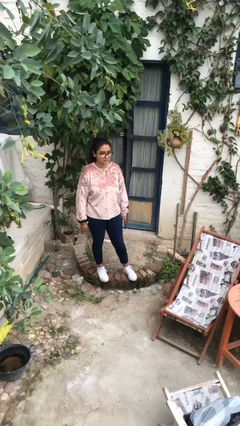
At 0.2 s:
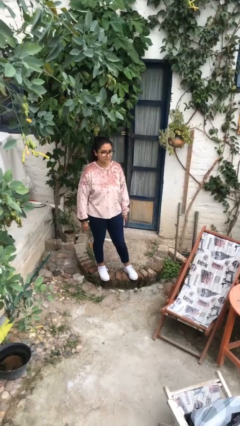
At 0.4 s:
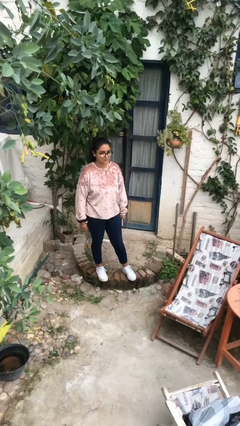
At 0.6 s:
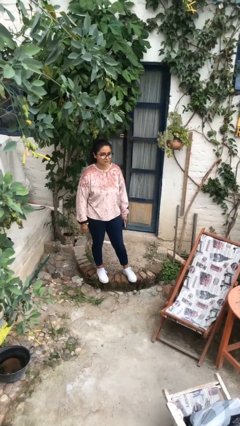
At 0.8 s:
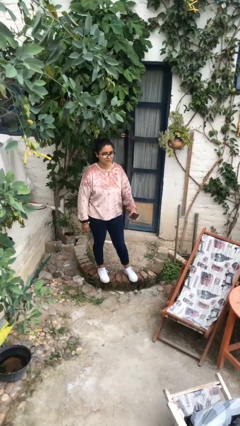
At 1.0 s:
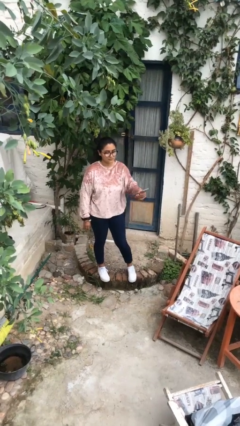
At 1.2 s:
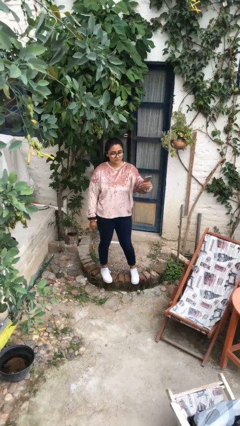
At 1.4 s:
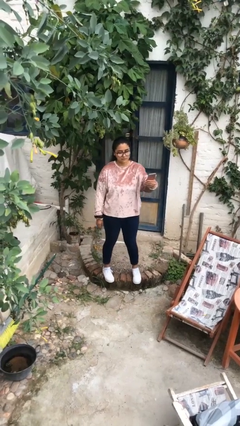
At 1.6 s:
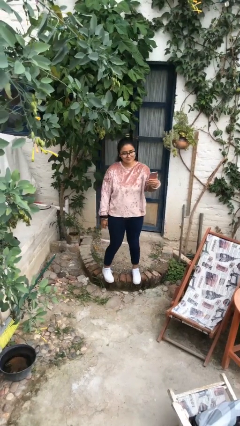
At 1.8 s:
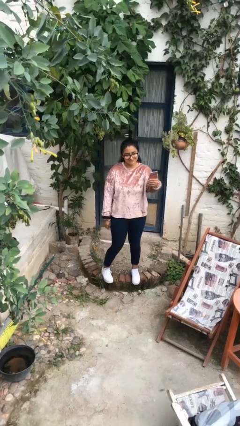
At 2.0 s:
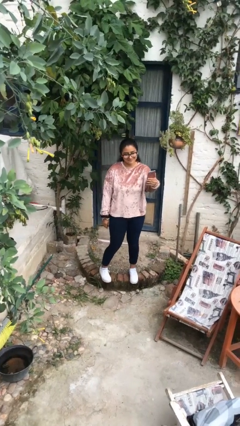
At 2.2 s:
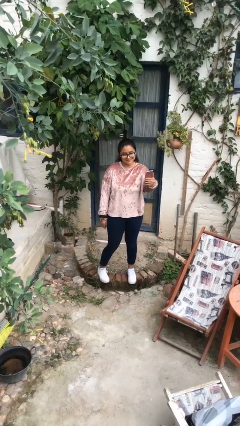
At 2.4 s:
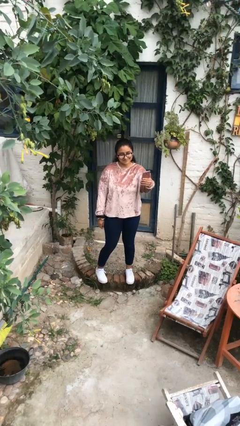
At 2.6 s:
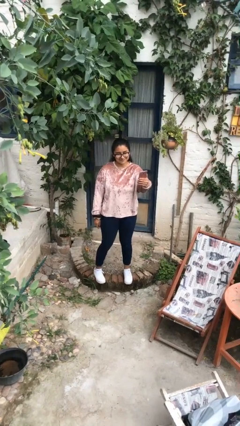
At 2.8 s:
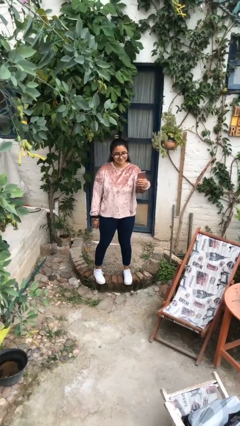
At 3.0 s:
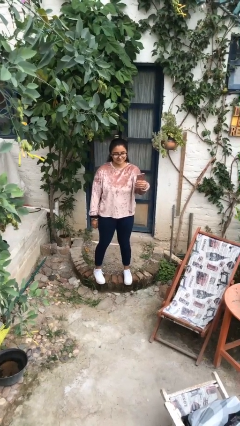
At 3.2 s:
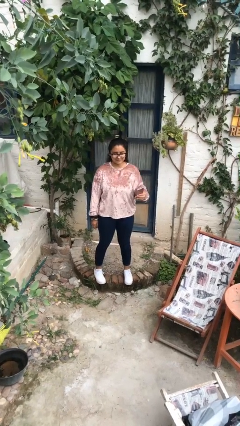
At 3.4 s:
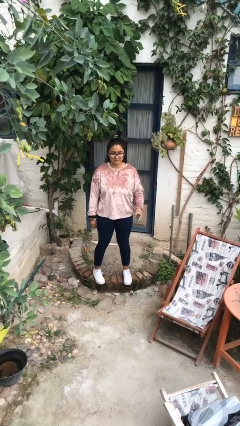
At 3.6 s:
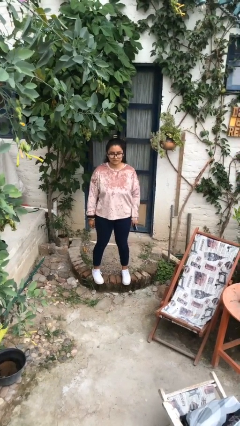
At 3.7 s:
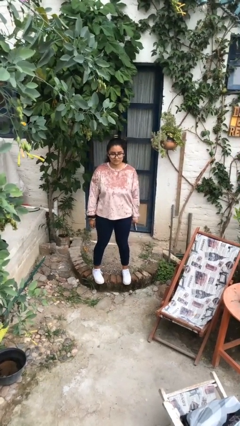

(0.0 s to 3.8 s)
person takes selfie

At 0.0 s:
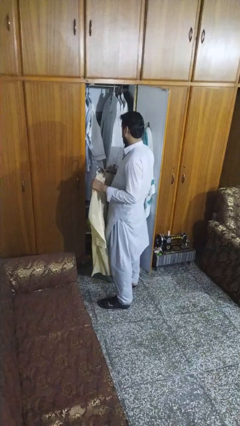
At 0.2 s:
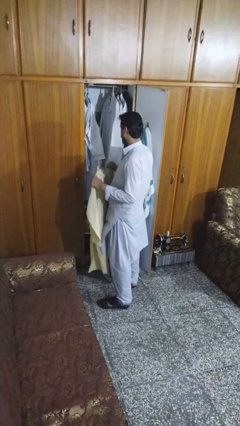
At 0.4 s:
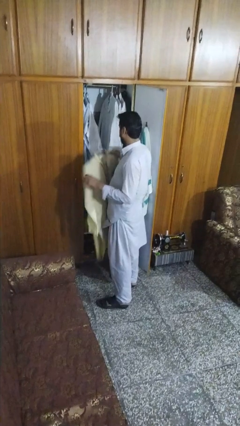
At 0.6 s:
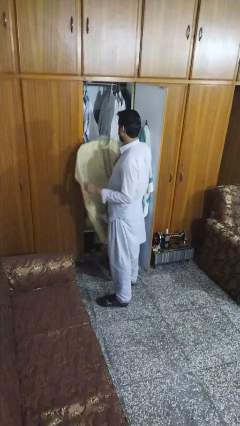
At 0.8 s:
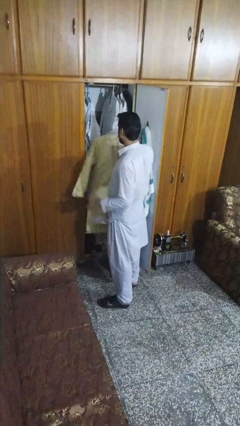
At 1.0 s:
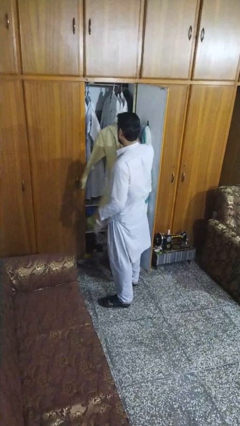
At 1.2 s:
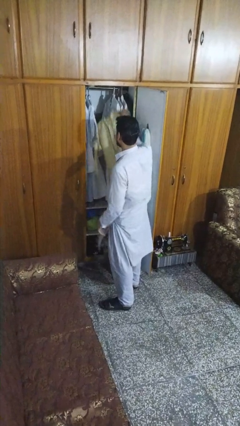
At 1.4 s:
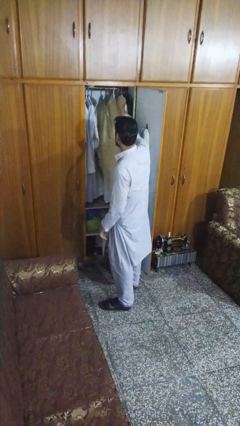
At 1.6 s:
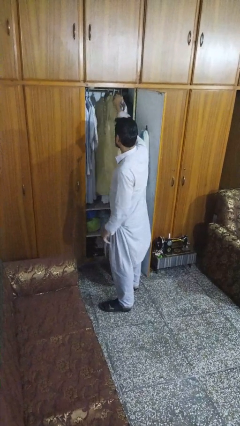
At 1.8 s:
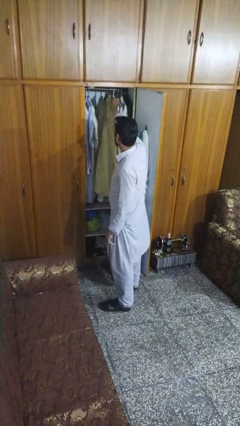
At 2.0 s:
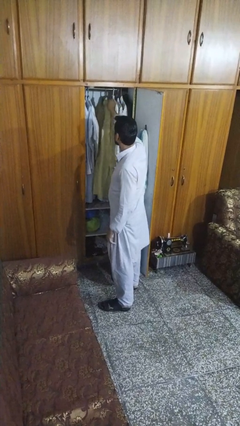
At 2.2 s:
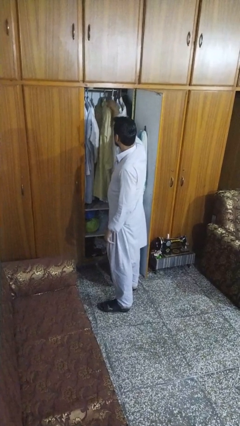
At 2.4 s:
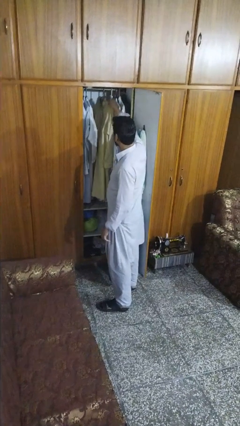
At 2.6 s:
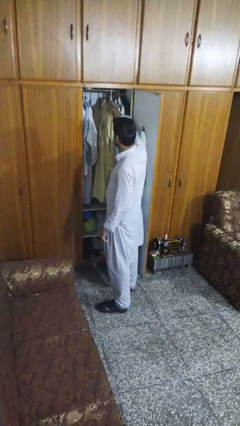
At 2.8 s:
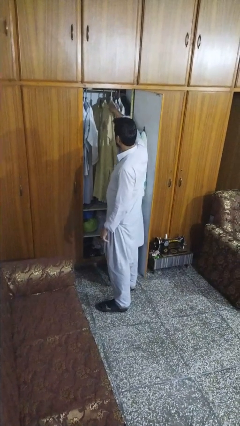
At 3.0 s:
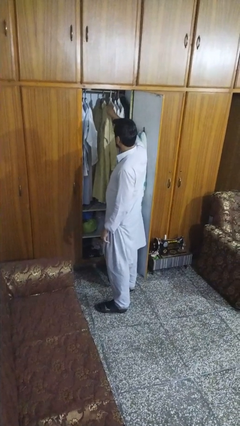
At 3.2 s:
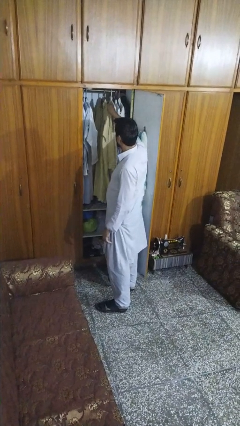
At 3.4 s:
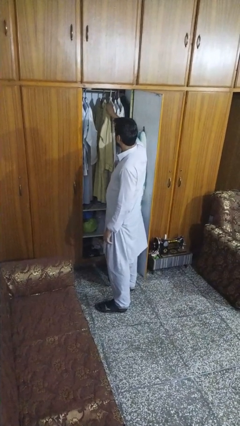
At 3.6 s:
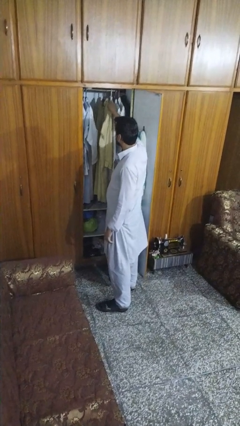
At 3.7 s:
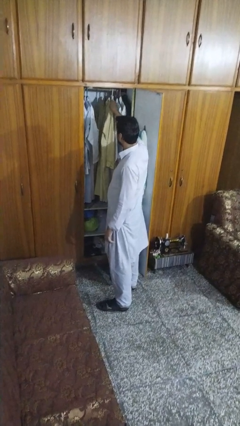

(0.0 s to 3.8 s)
person puts clothes into dresser

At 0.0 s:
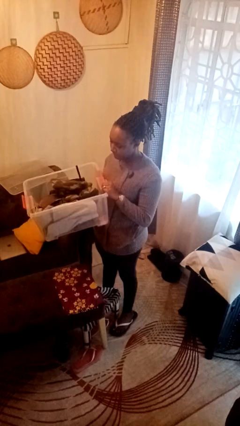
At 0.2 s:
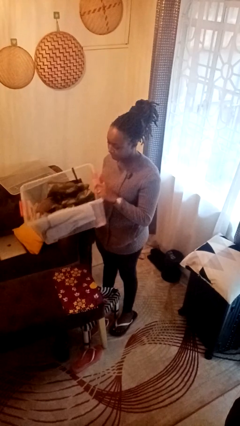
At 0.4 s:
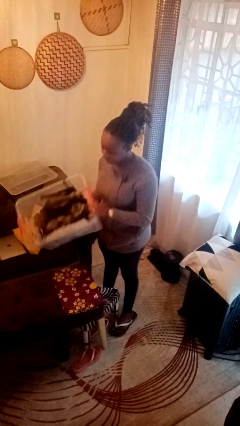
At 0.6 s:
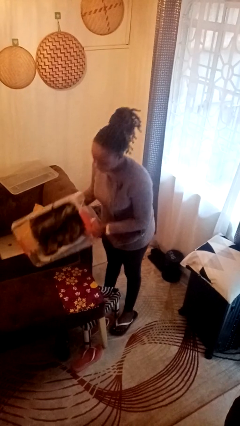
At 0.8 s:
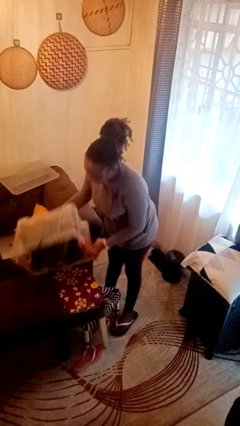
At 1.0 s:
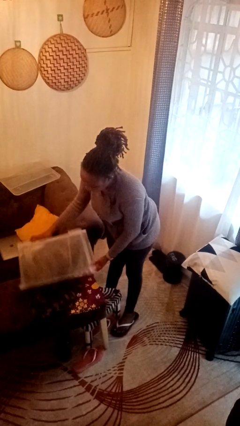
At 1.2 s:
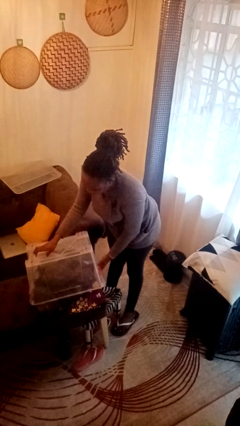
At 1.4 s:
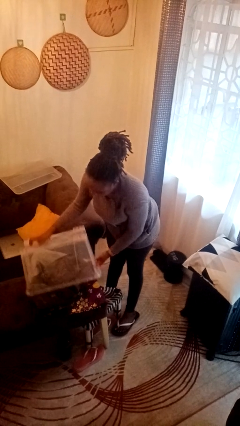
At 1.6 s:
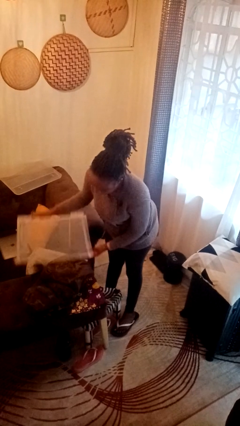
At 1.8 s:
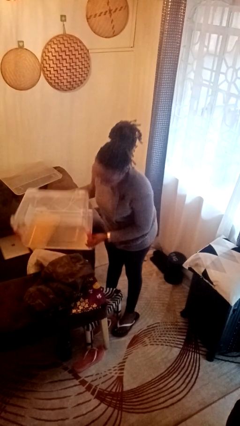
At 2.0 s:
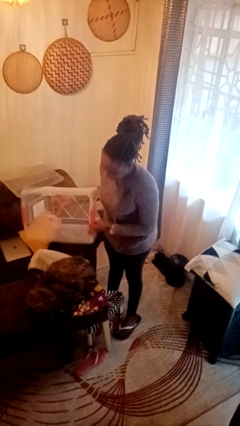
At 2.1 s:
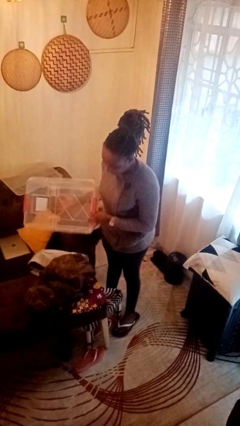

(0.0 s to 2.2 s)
person unloads box onto table

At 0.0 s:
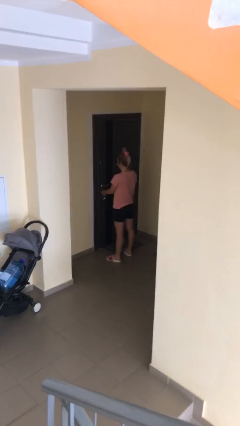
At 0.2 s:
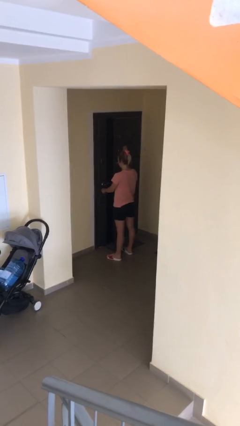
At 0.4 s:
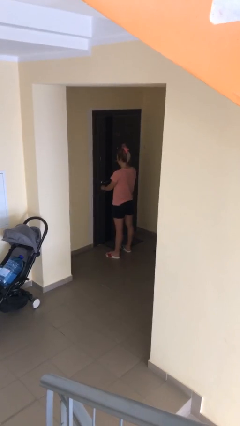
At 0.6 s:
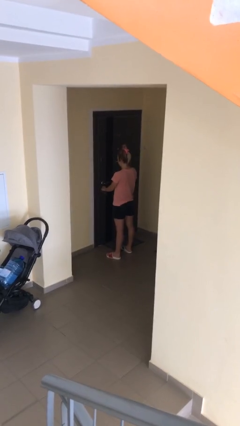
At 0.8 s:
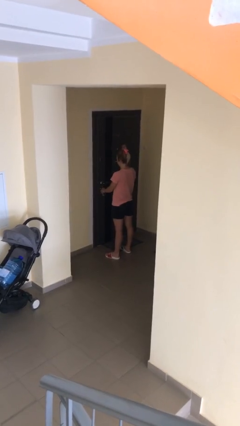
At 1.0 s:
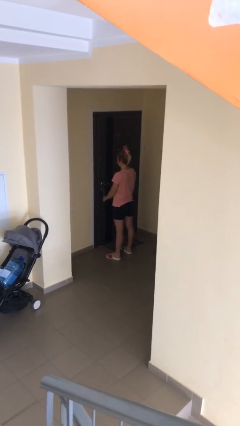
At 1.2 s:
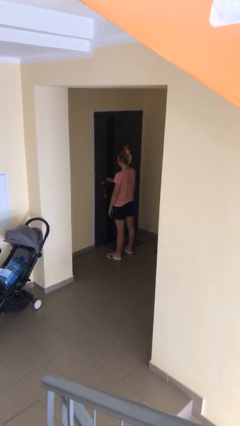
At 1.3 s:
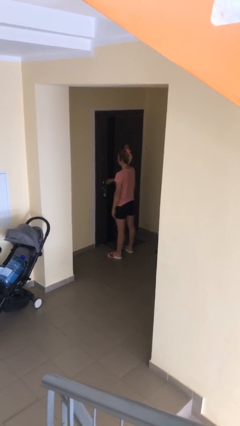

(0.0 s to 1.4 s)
person unlocks door with keys

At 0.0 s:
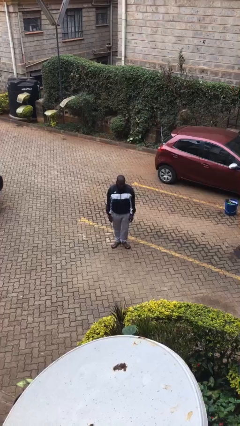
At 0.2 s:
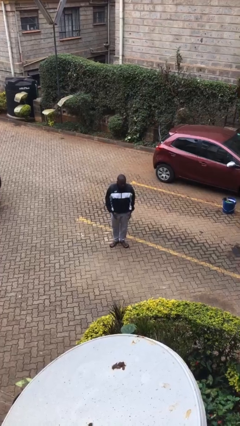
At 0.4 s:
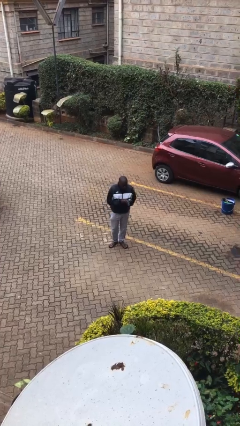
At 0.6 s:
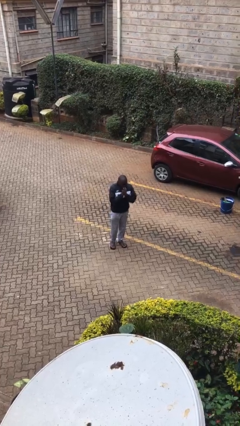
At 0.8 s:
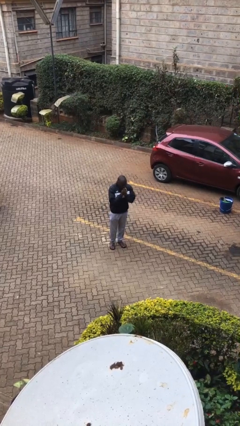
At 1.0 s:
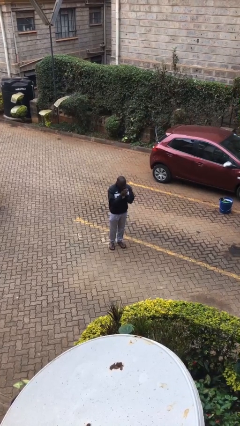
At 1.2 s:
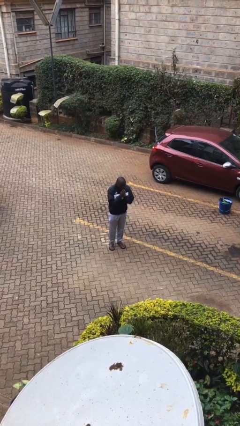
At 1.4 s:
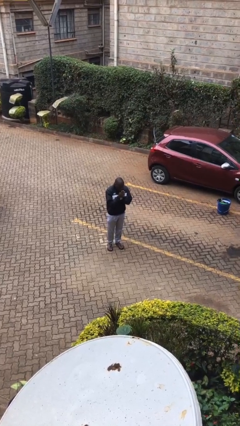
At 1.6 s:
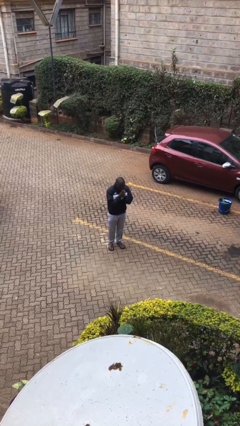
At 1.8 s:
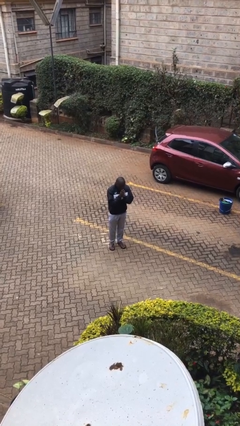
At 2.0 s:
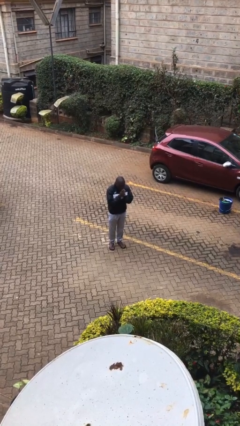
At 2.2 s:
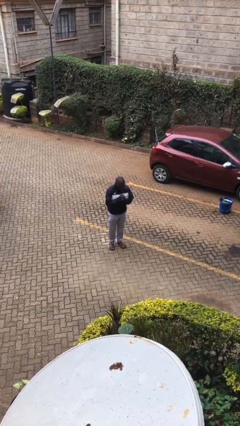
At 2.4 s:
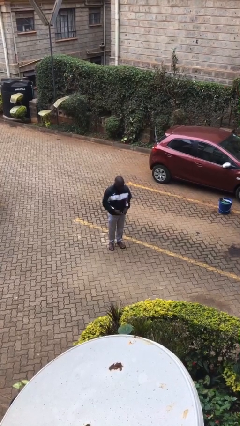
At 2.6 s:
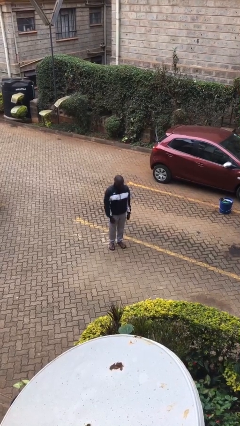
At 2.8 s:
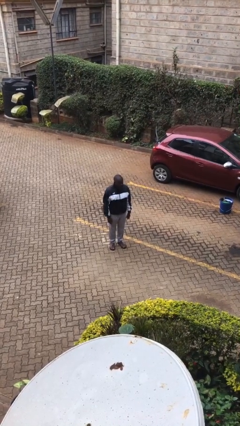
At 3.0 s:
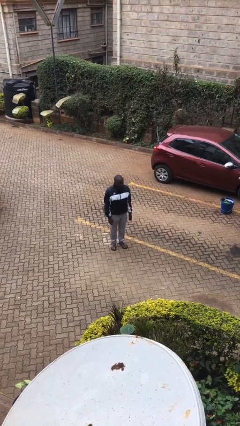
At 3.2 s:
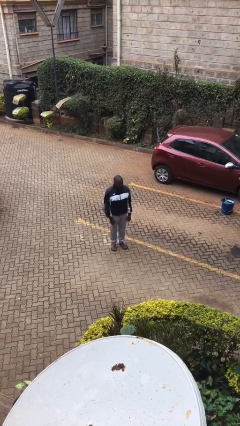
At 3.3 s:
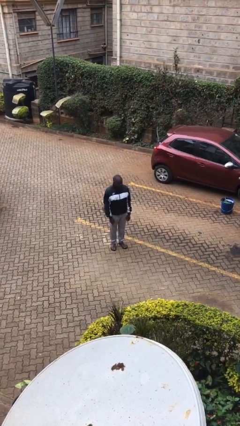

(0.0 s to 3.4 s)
person blows into hands

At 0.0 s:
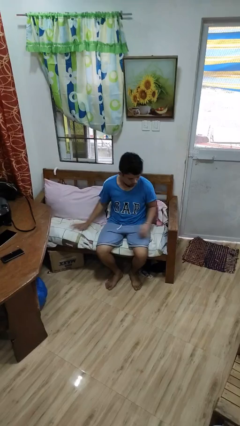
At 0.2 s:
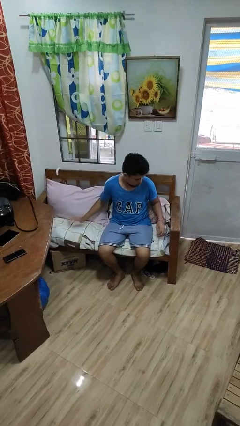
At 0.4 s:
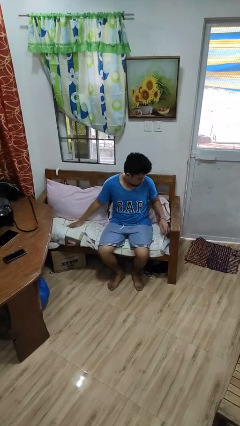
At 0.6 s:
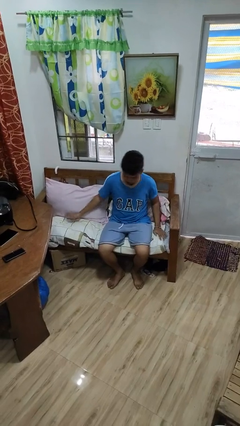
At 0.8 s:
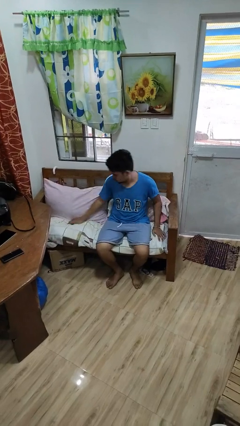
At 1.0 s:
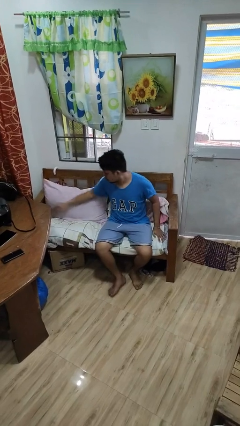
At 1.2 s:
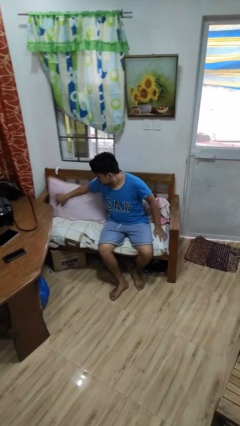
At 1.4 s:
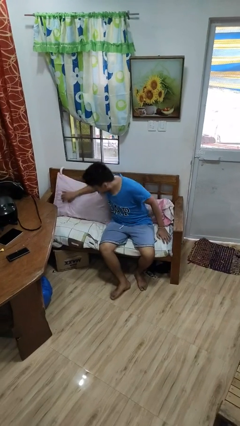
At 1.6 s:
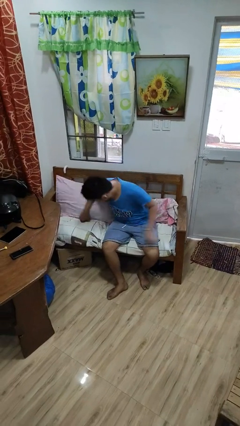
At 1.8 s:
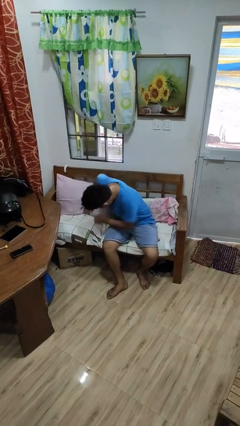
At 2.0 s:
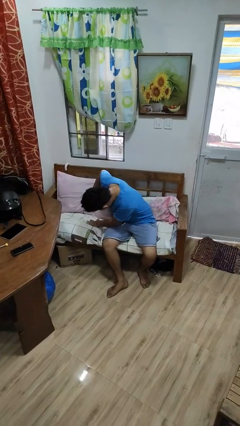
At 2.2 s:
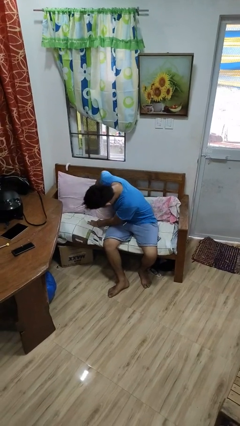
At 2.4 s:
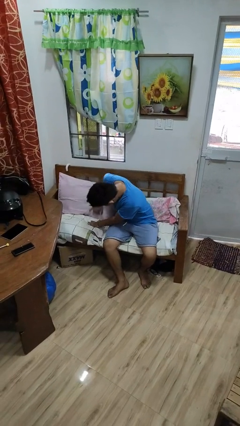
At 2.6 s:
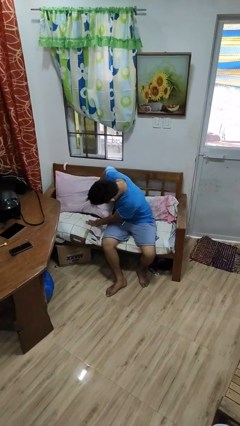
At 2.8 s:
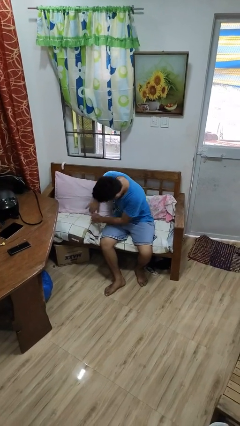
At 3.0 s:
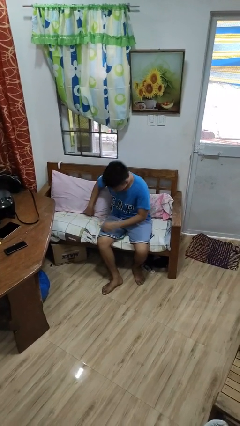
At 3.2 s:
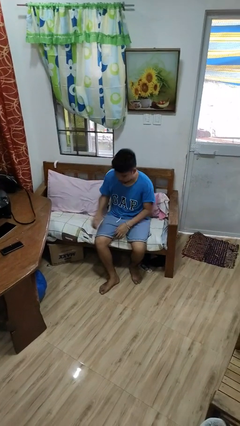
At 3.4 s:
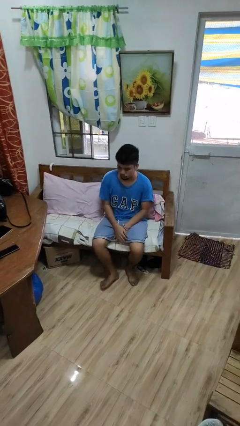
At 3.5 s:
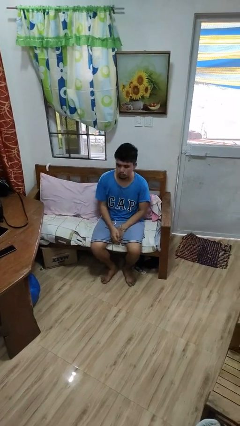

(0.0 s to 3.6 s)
person searches in couch
